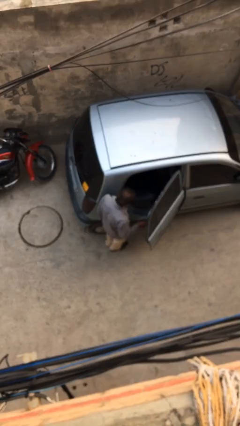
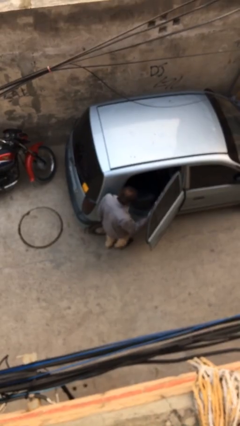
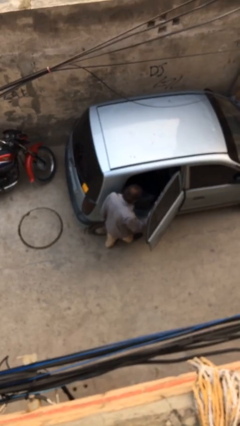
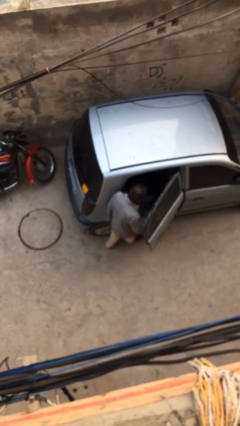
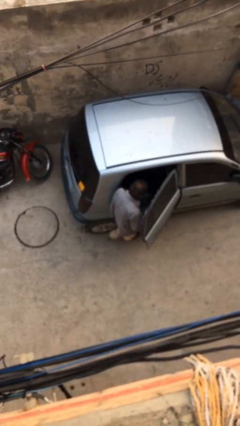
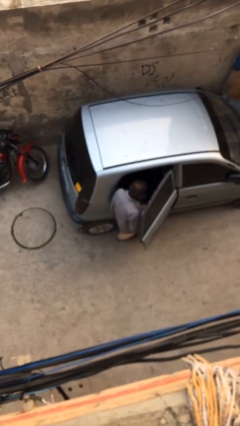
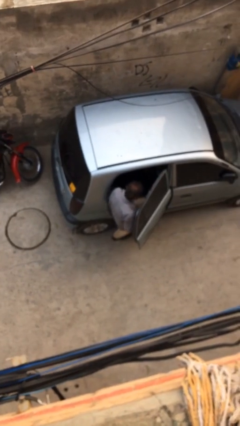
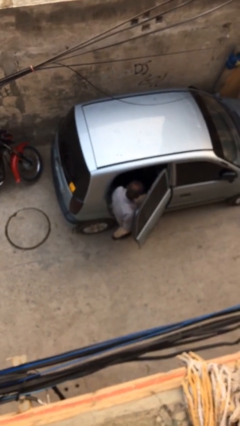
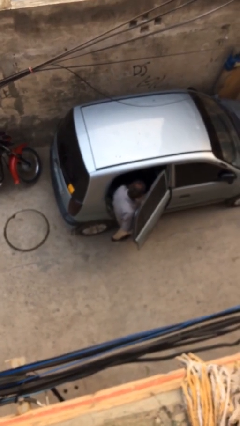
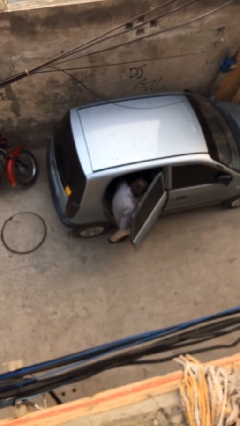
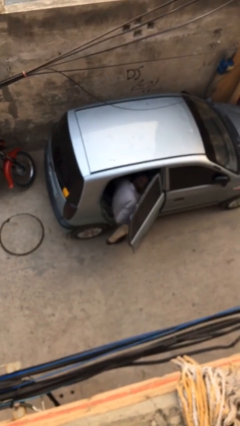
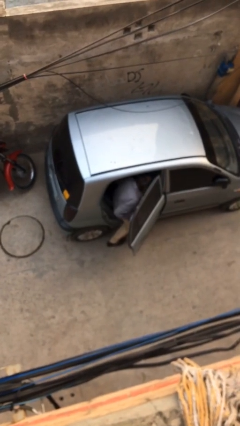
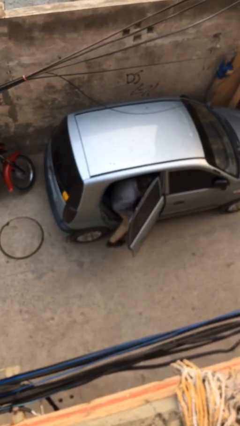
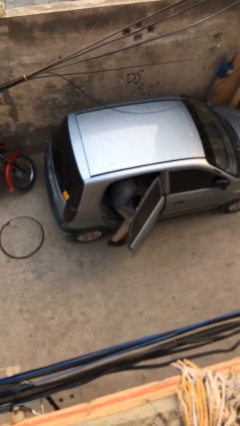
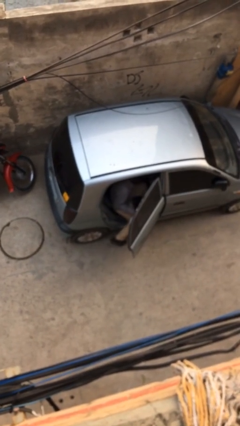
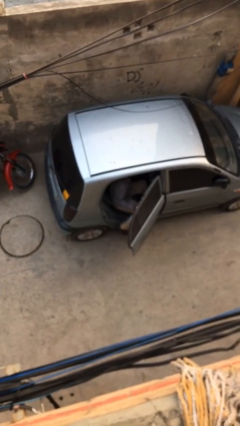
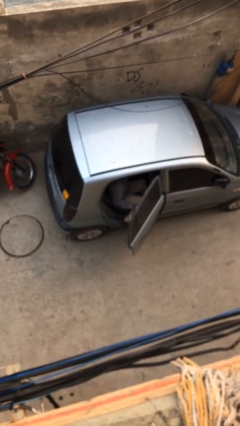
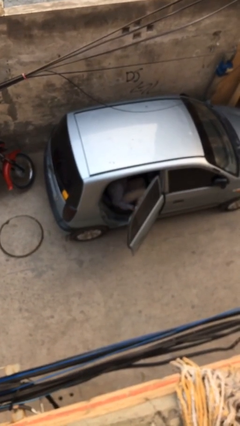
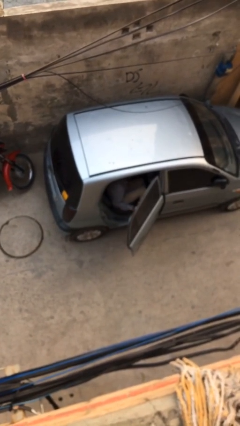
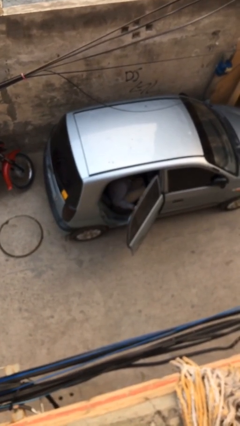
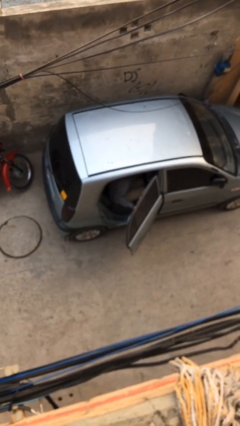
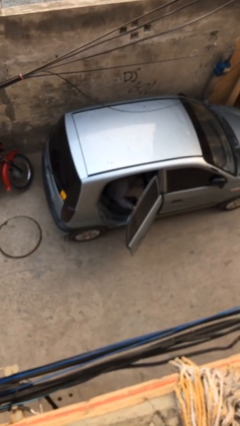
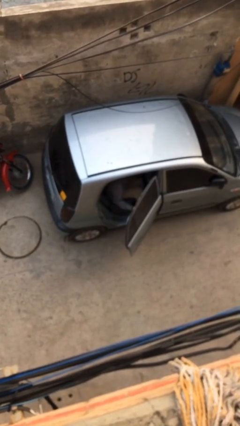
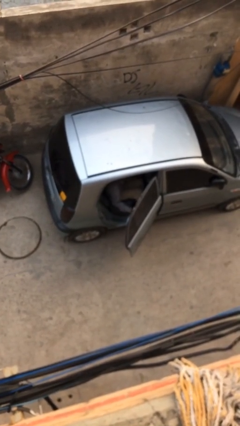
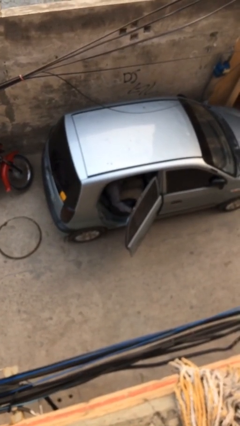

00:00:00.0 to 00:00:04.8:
person enters car

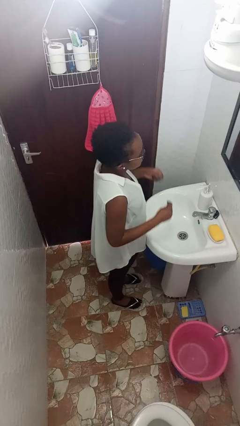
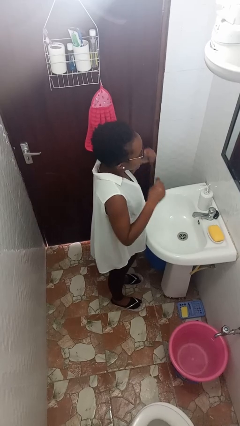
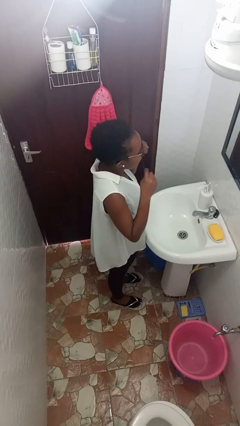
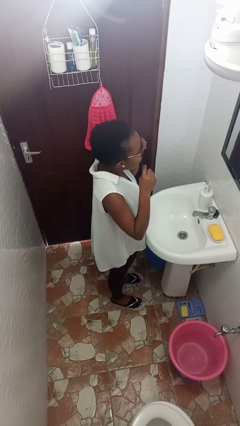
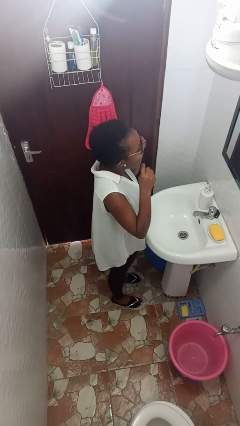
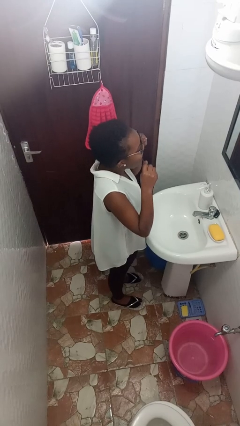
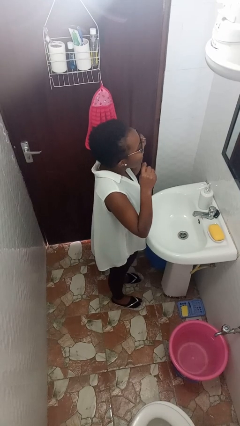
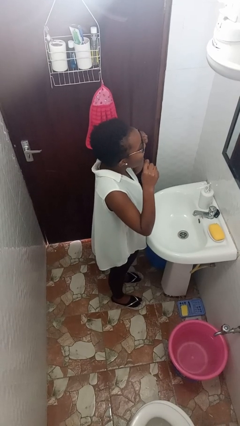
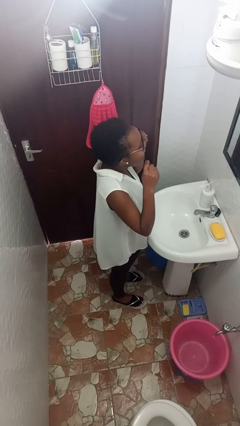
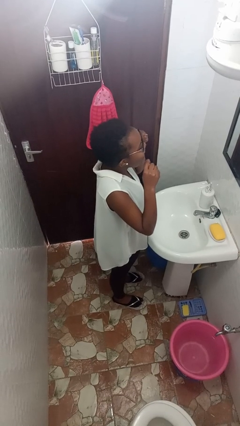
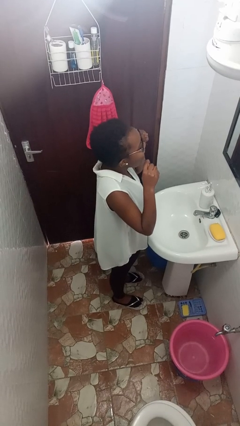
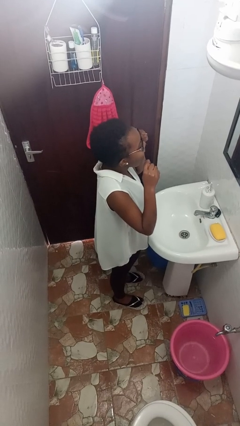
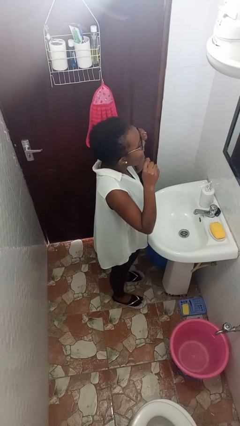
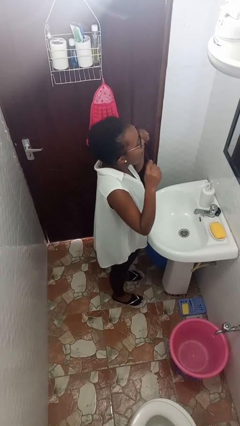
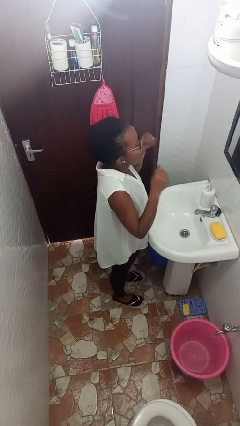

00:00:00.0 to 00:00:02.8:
person flosses

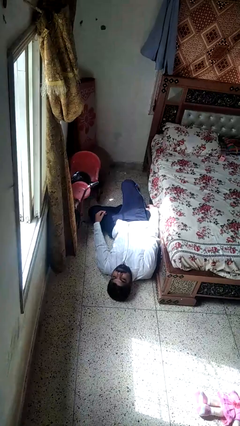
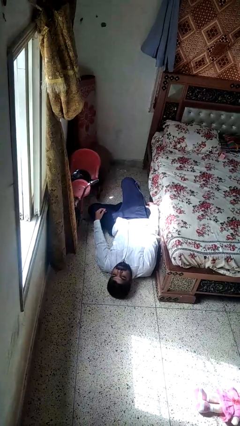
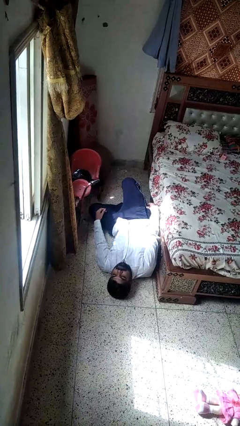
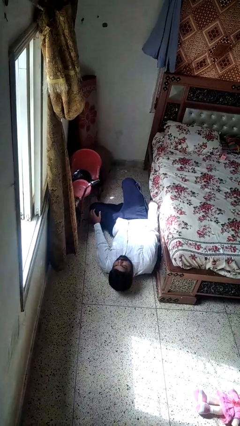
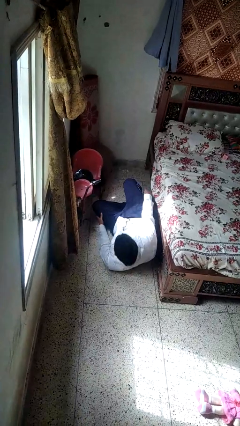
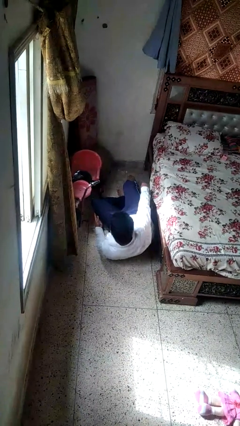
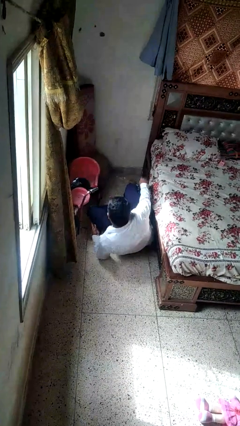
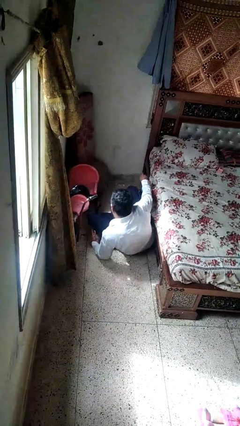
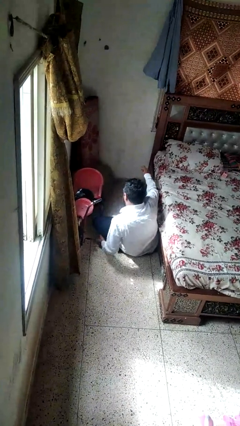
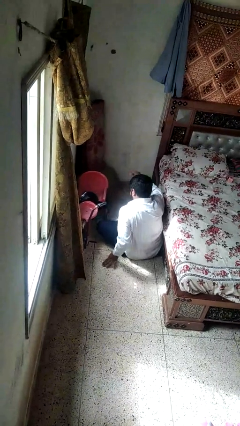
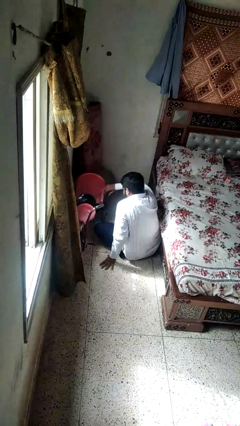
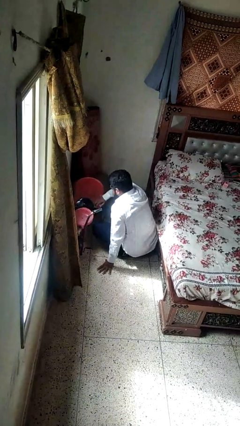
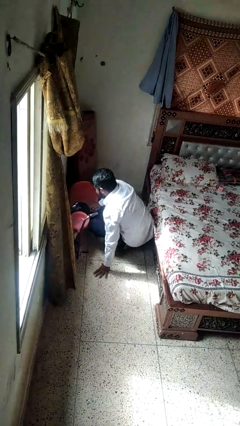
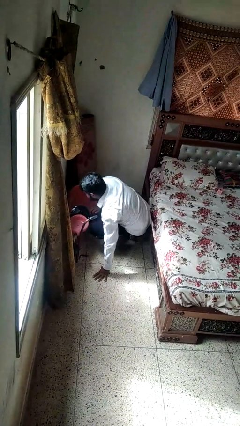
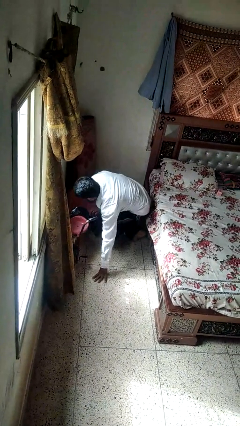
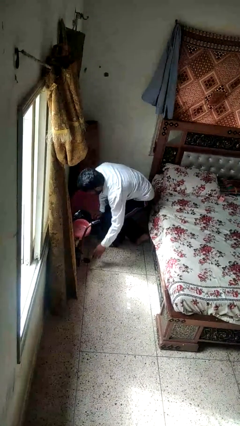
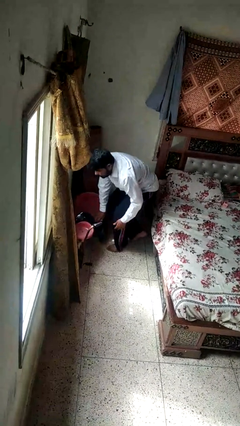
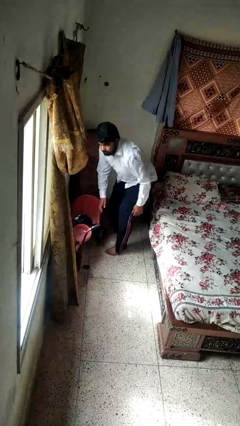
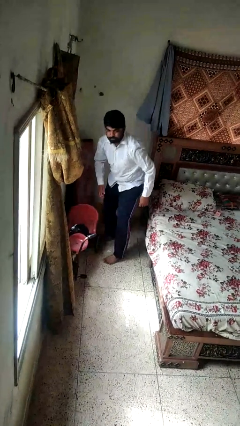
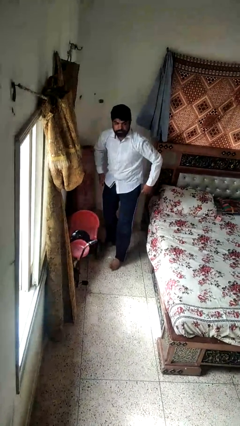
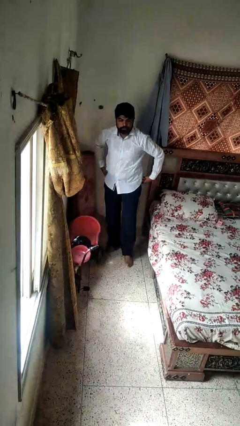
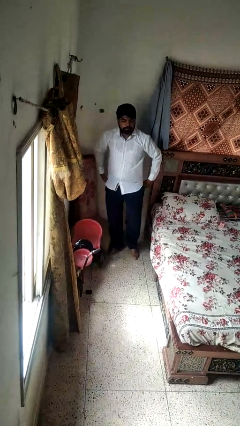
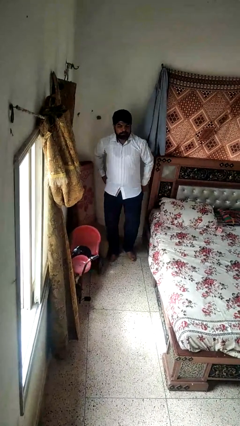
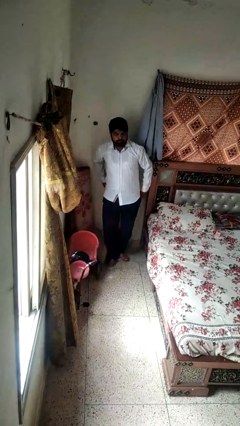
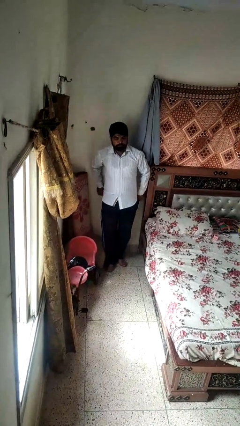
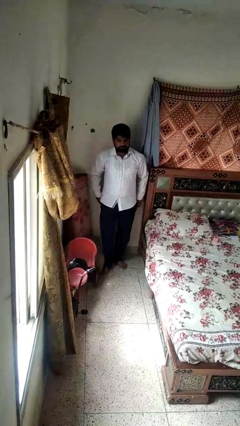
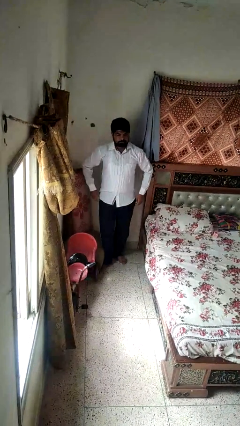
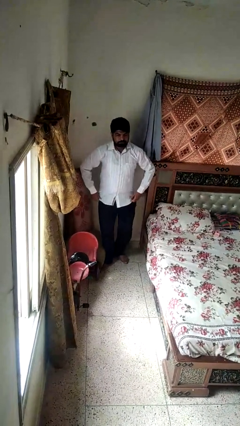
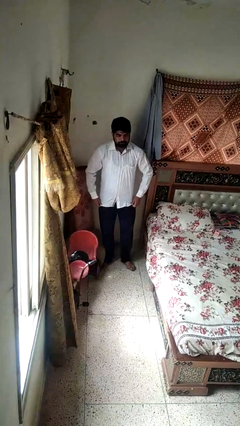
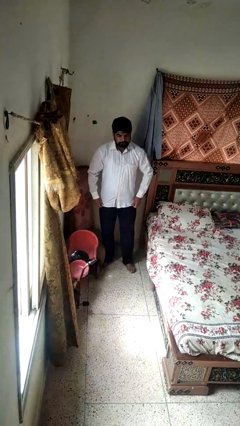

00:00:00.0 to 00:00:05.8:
person stands up from floor

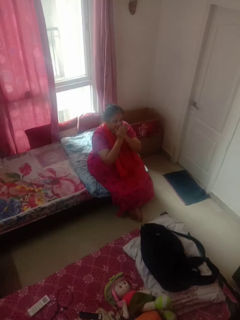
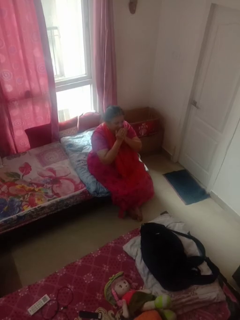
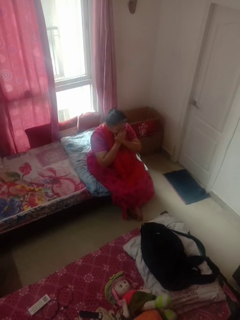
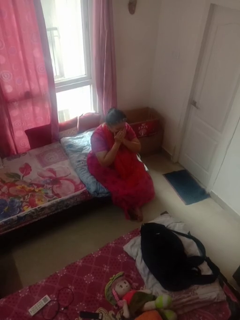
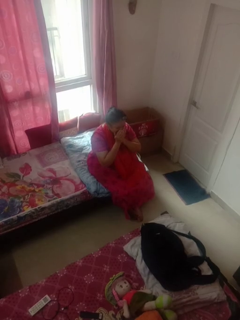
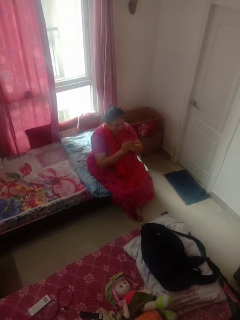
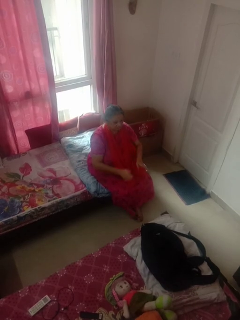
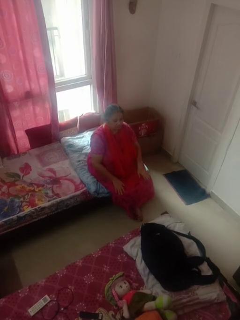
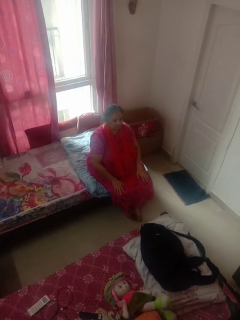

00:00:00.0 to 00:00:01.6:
person sneezes into hand

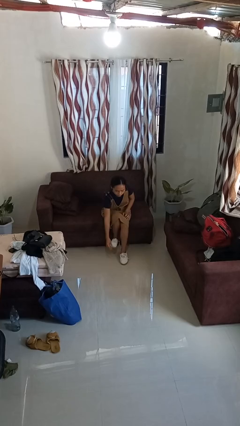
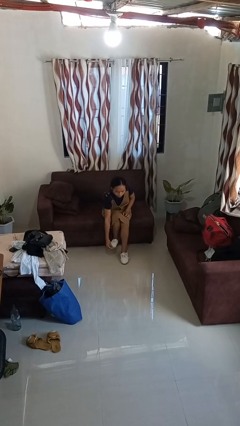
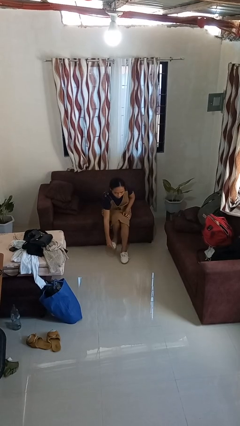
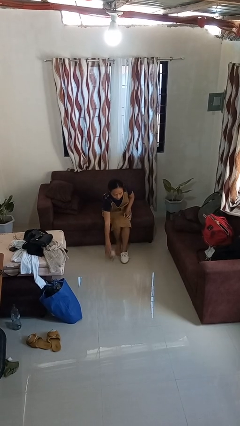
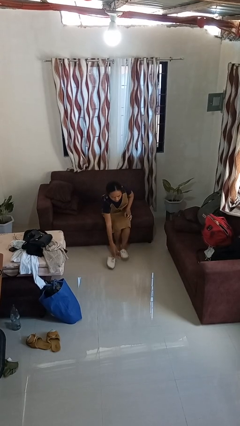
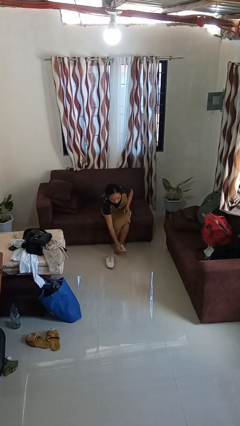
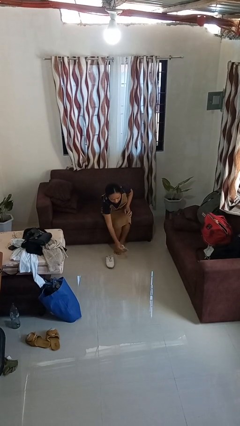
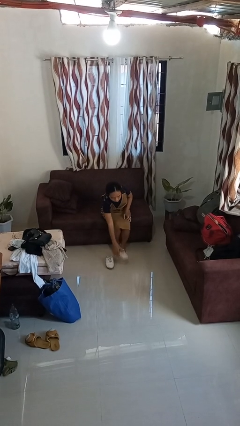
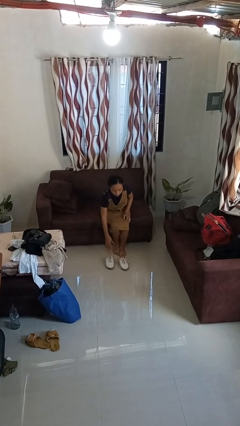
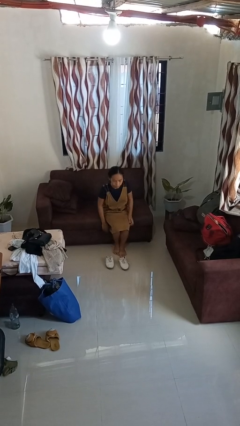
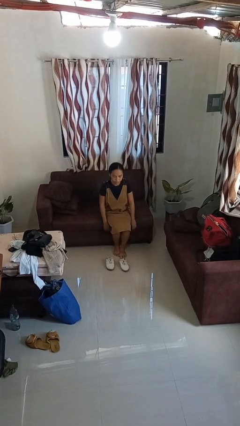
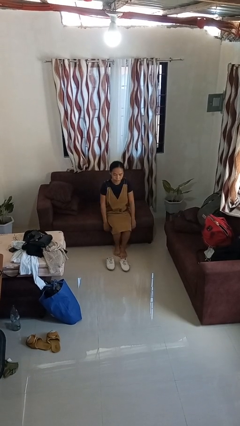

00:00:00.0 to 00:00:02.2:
person takes off shoes

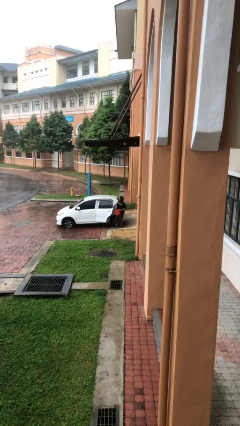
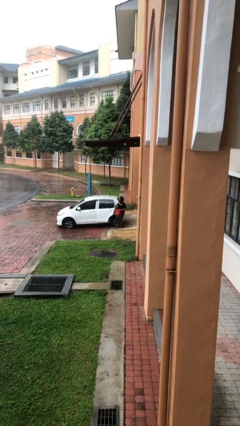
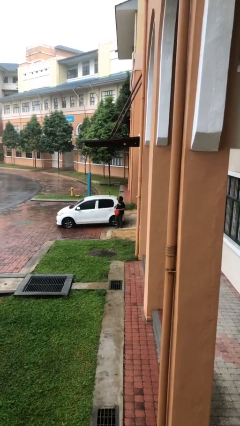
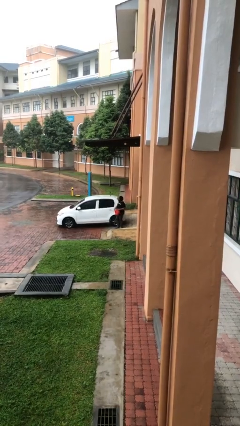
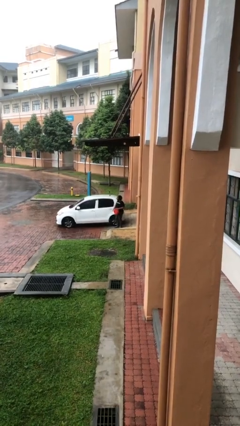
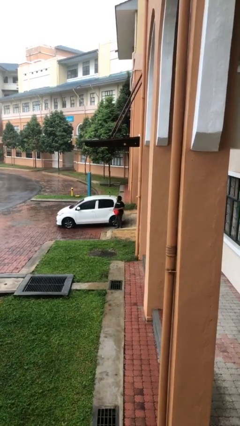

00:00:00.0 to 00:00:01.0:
person closes car door
